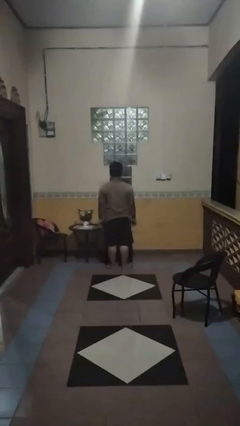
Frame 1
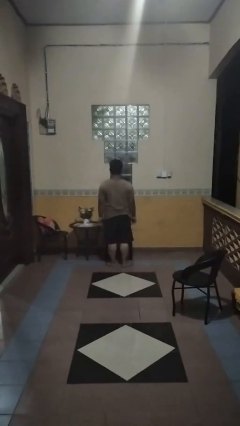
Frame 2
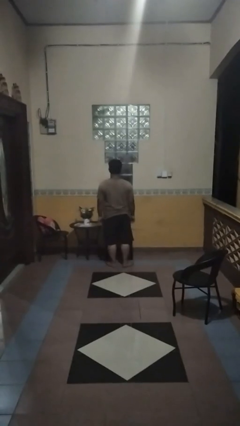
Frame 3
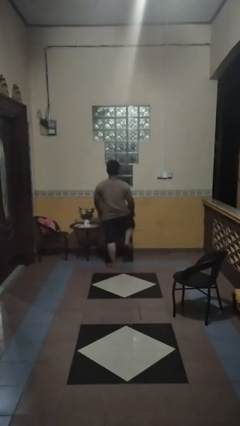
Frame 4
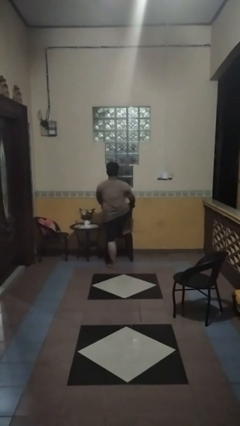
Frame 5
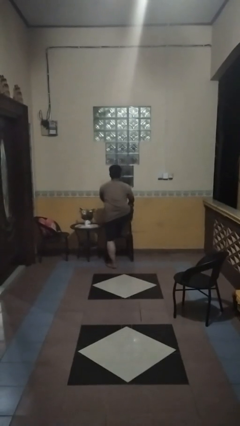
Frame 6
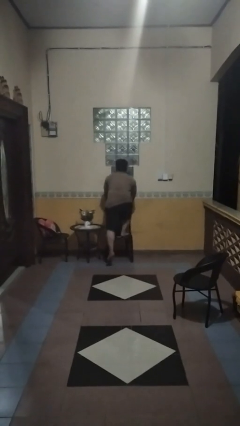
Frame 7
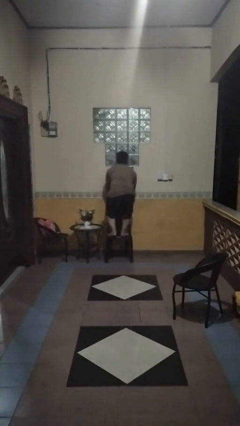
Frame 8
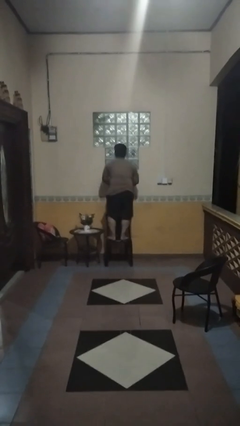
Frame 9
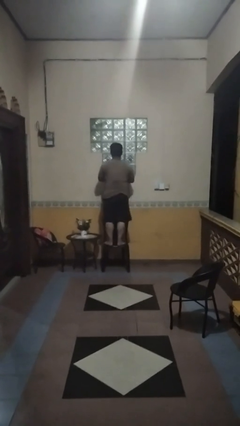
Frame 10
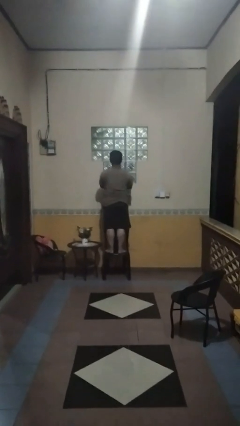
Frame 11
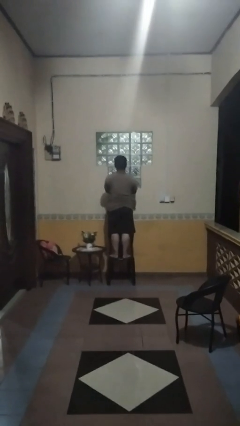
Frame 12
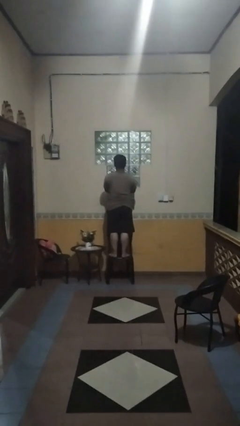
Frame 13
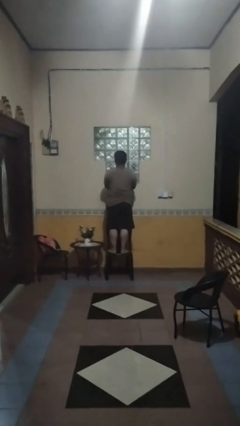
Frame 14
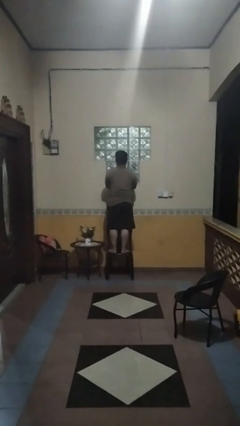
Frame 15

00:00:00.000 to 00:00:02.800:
person climbs on chair

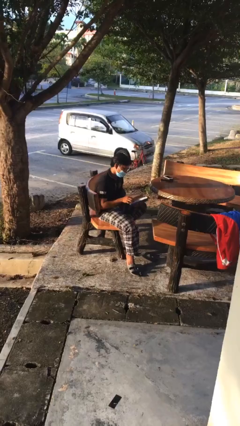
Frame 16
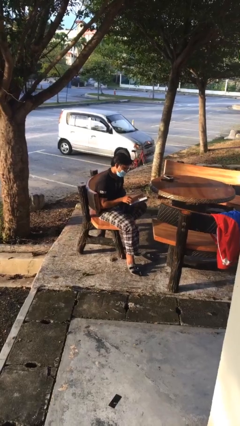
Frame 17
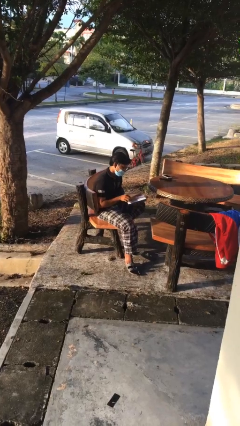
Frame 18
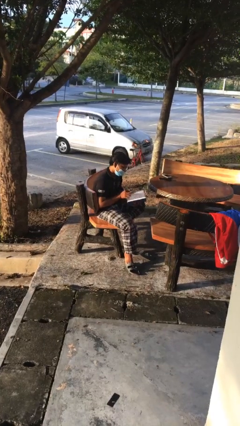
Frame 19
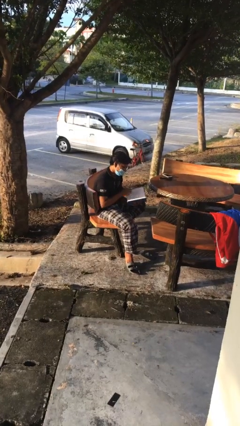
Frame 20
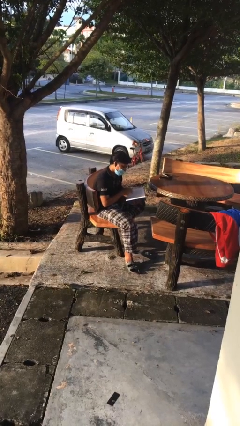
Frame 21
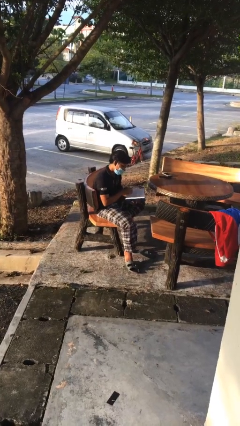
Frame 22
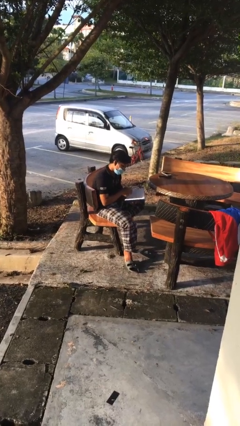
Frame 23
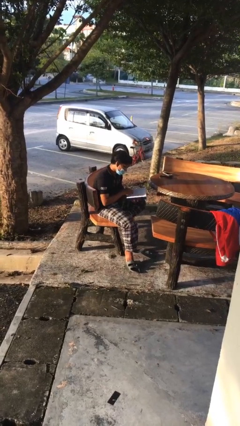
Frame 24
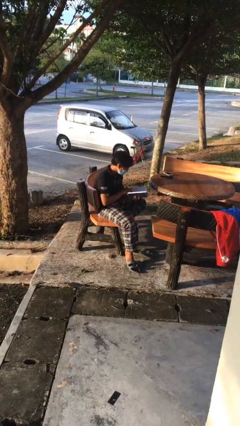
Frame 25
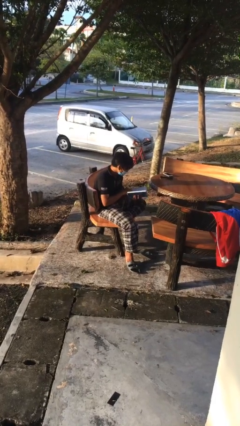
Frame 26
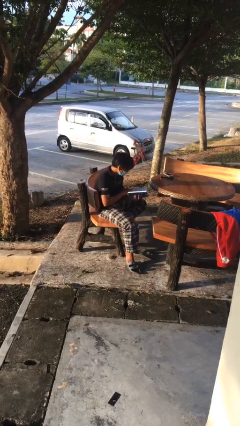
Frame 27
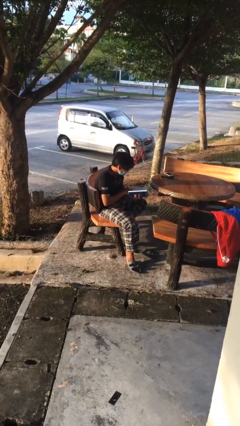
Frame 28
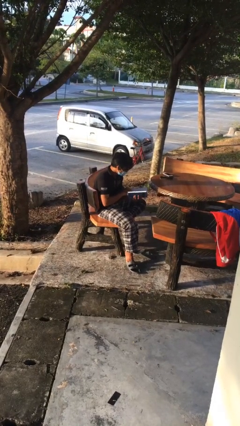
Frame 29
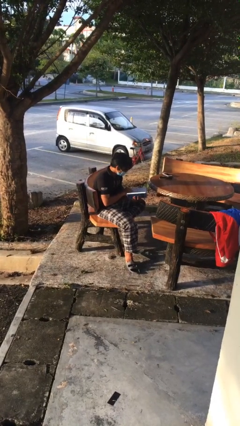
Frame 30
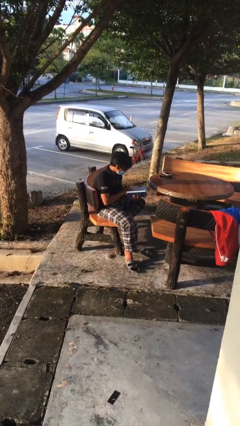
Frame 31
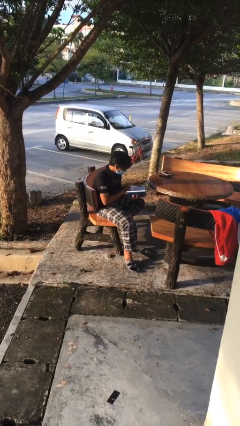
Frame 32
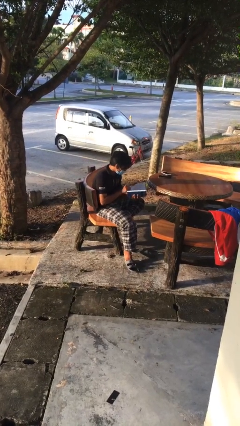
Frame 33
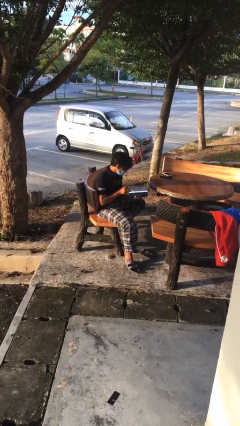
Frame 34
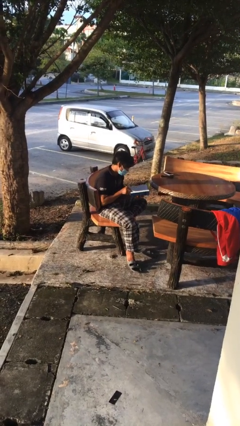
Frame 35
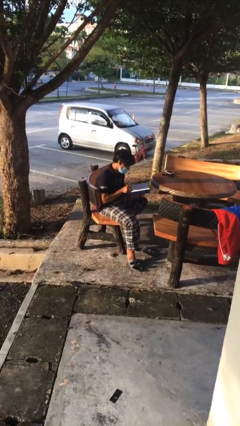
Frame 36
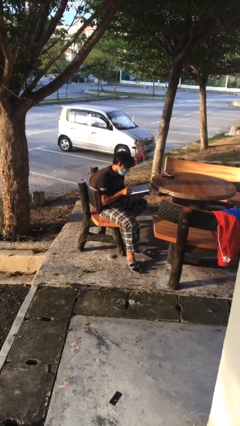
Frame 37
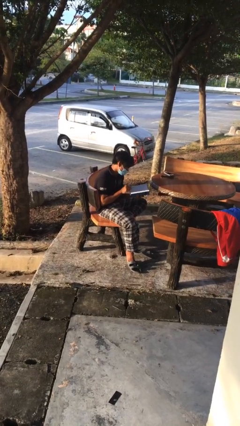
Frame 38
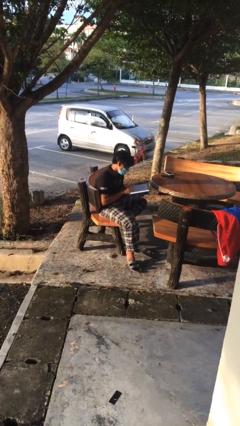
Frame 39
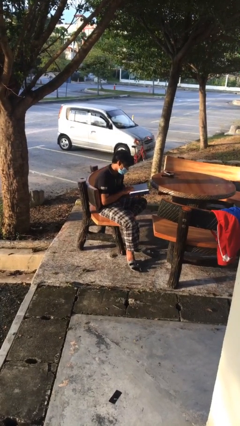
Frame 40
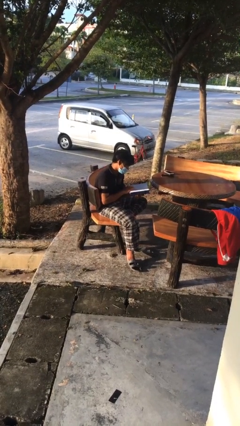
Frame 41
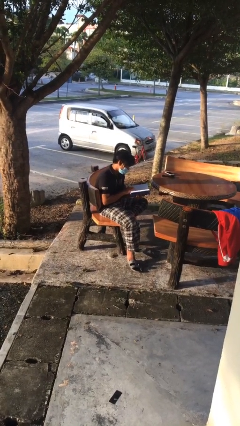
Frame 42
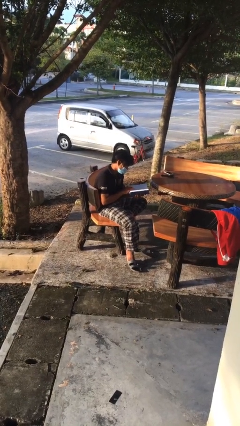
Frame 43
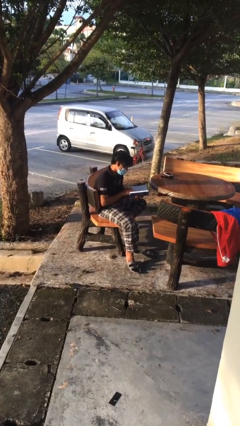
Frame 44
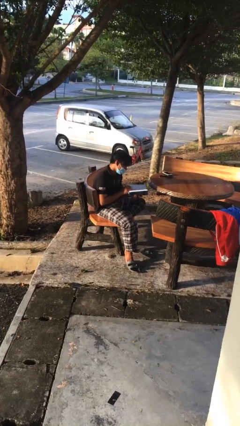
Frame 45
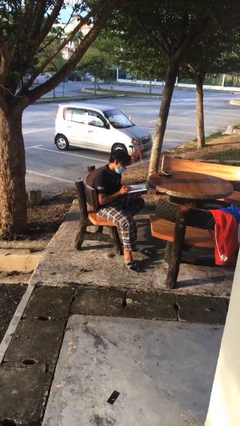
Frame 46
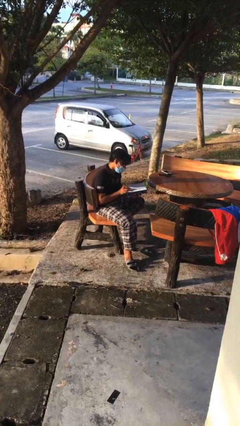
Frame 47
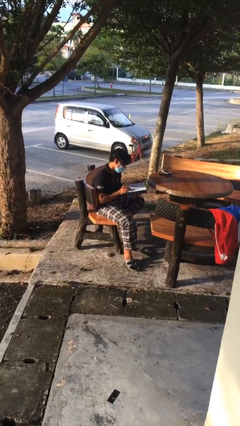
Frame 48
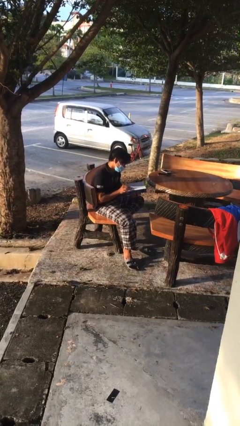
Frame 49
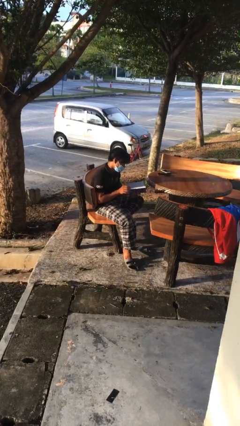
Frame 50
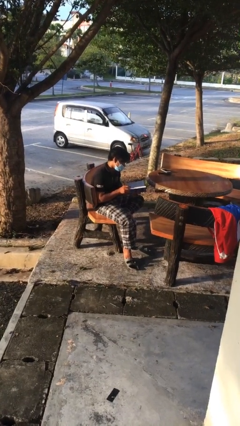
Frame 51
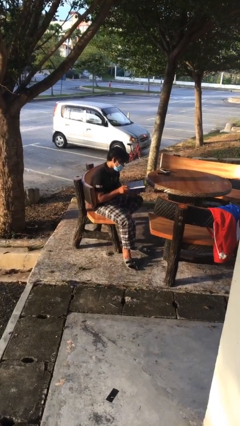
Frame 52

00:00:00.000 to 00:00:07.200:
person reads document

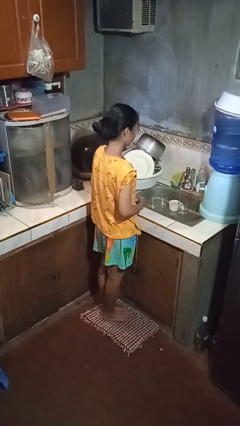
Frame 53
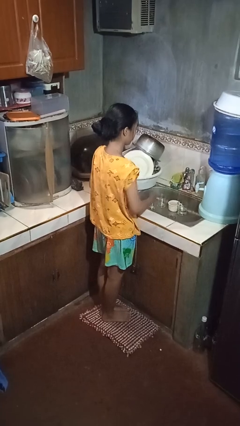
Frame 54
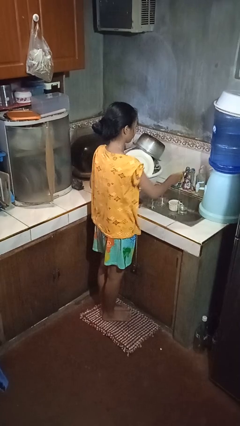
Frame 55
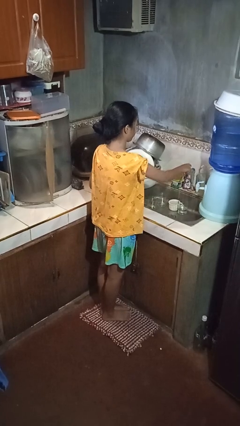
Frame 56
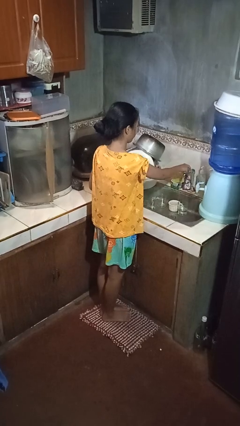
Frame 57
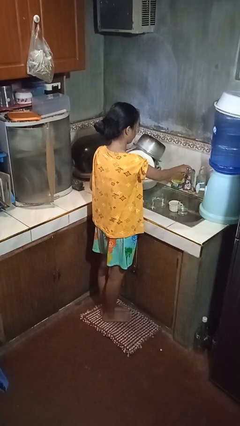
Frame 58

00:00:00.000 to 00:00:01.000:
person turns off faucet

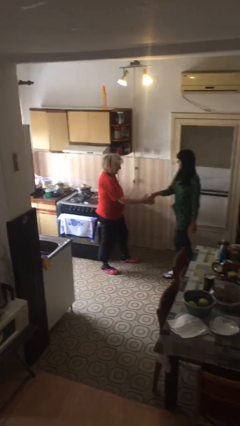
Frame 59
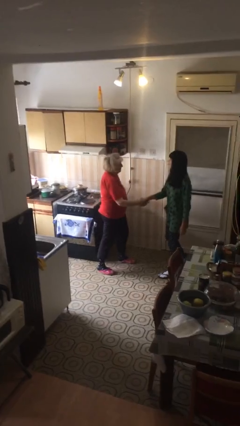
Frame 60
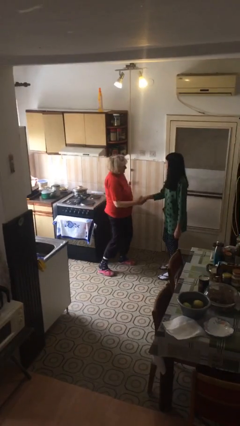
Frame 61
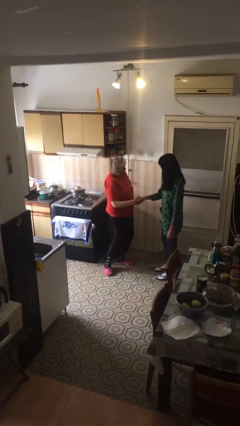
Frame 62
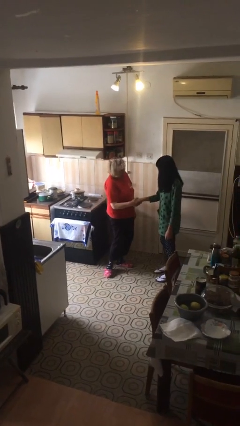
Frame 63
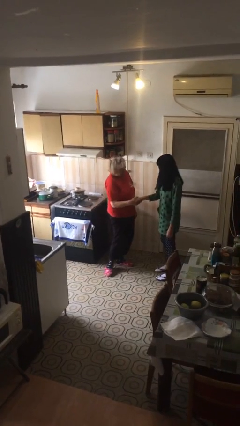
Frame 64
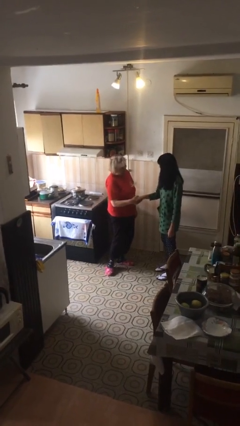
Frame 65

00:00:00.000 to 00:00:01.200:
person shakes hand

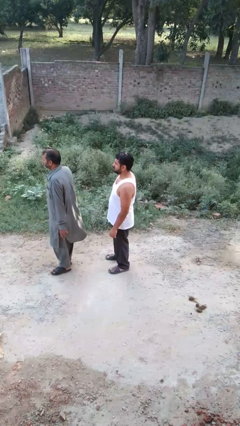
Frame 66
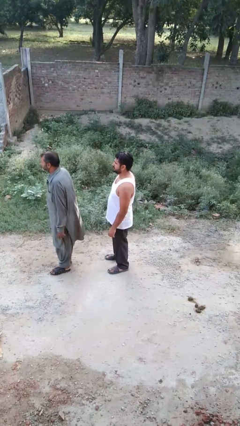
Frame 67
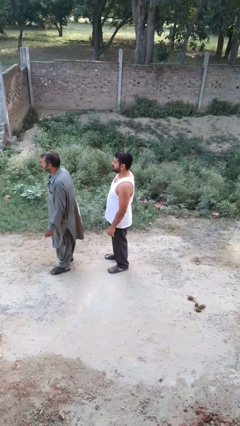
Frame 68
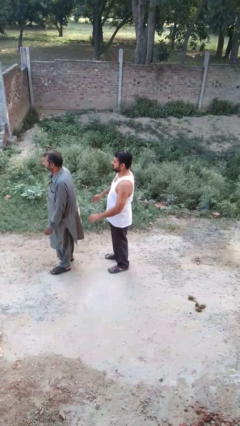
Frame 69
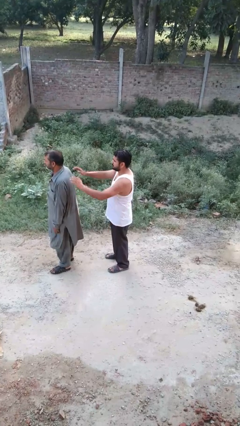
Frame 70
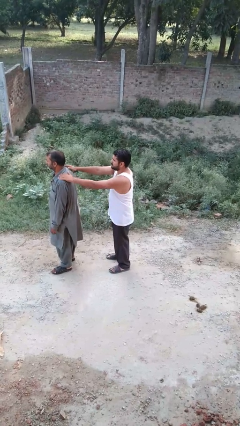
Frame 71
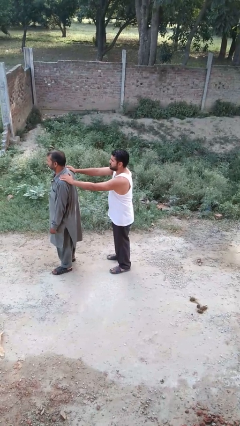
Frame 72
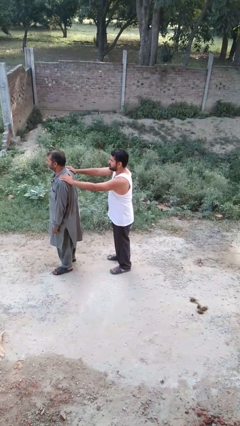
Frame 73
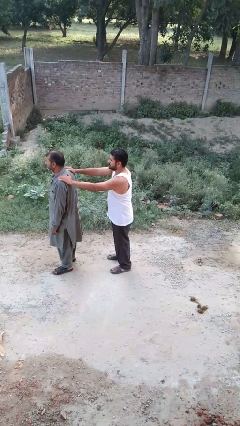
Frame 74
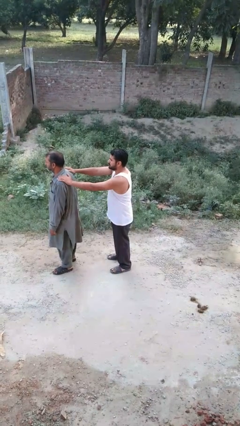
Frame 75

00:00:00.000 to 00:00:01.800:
person grabs person by shoulder

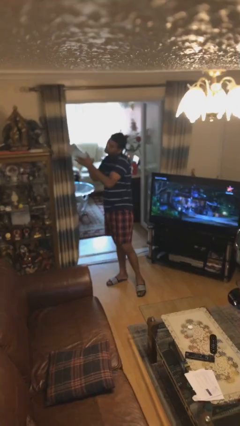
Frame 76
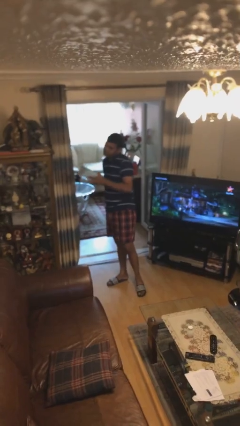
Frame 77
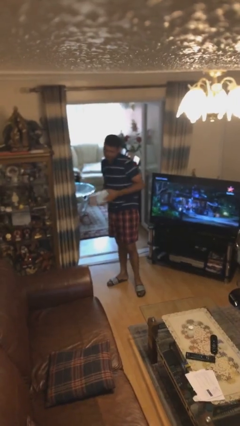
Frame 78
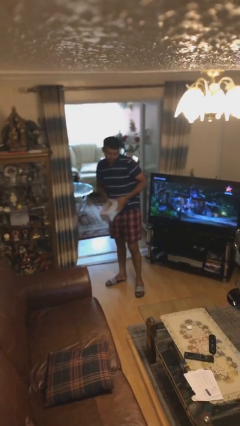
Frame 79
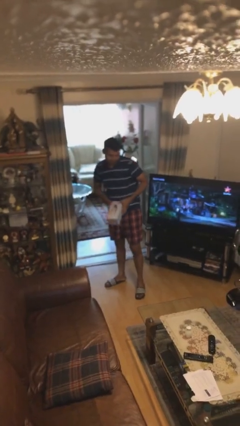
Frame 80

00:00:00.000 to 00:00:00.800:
person picks up object from shelf

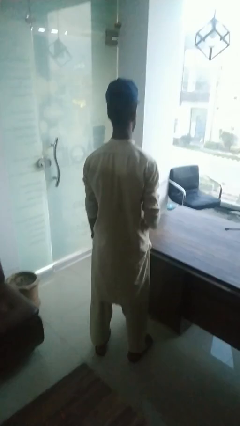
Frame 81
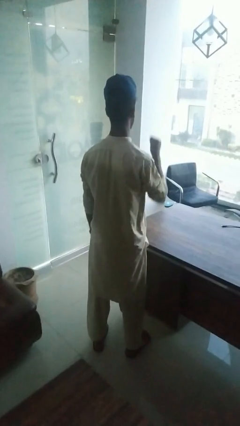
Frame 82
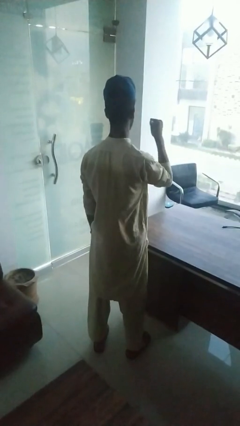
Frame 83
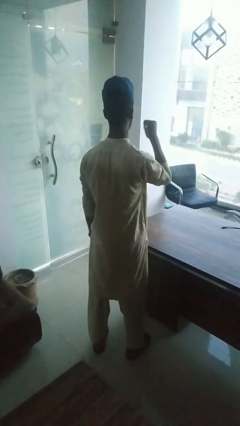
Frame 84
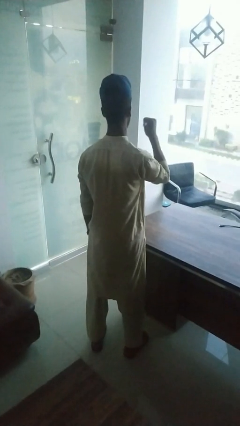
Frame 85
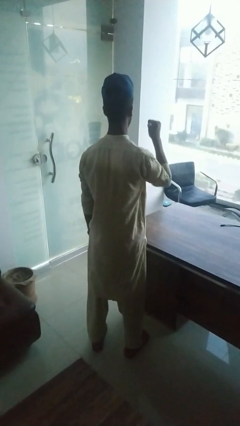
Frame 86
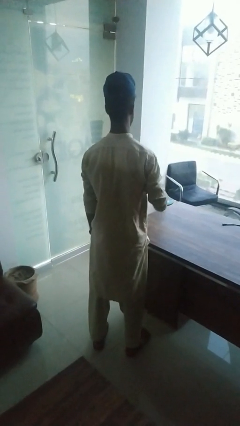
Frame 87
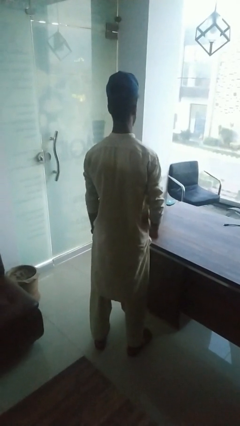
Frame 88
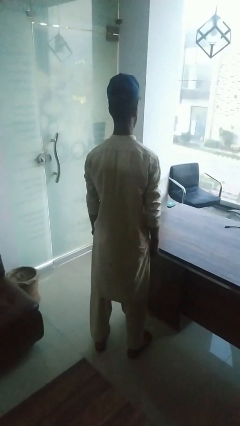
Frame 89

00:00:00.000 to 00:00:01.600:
person gestures behind me

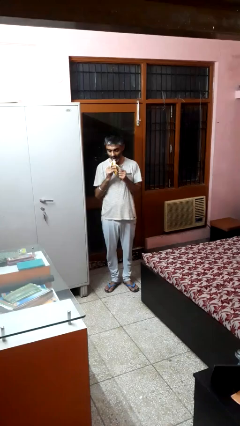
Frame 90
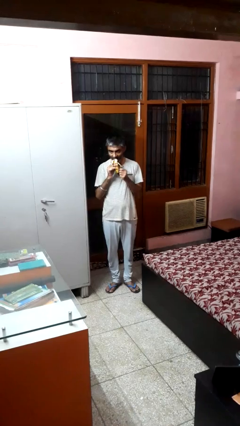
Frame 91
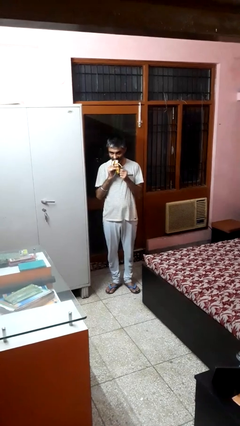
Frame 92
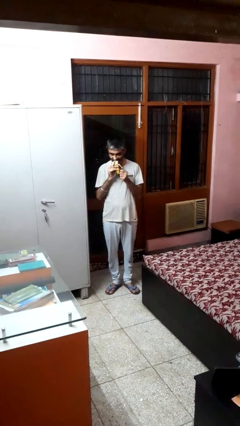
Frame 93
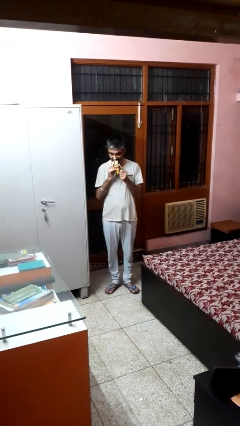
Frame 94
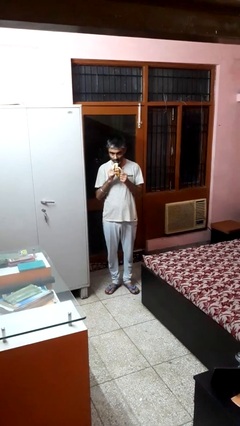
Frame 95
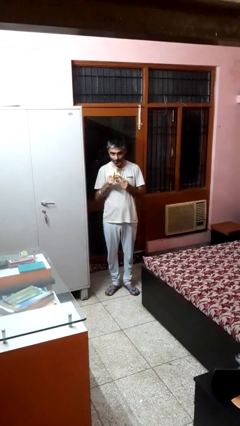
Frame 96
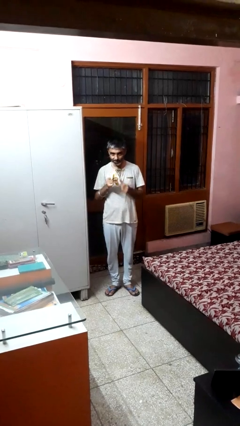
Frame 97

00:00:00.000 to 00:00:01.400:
person eats banana
